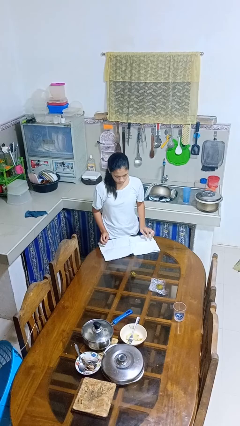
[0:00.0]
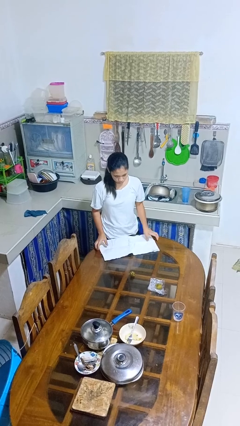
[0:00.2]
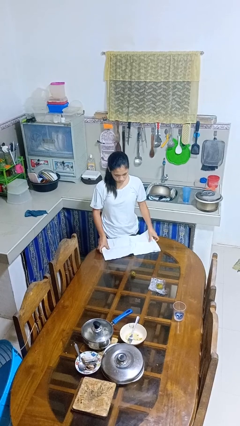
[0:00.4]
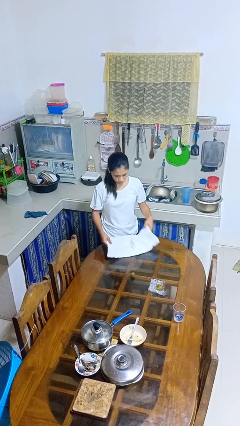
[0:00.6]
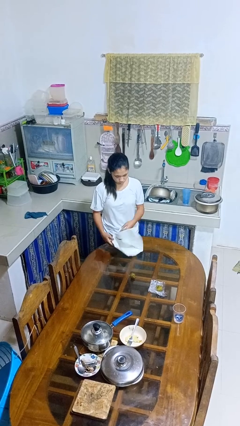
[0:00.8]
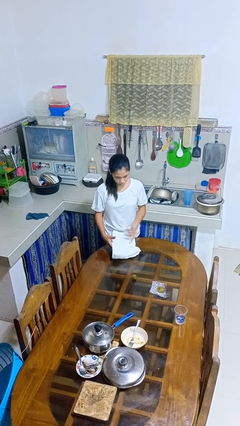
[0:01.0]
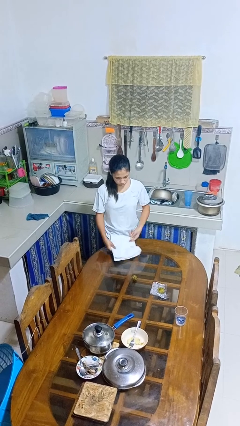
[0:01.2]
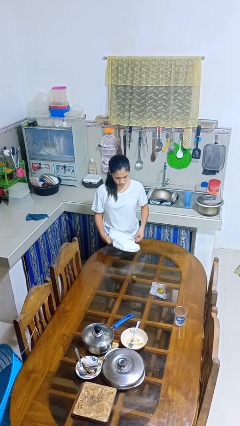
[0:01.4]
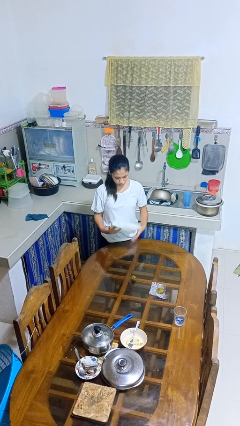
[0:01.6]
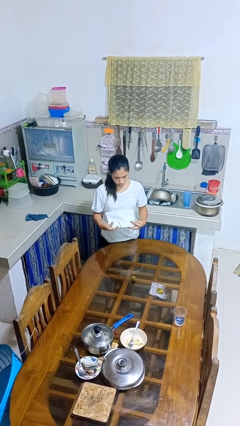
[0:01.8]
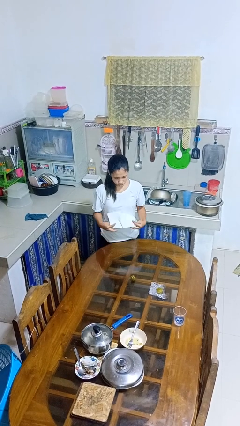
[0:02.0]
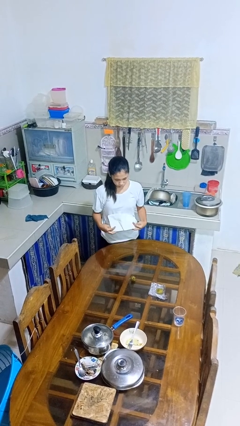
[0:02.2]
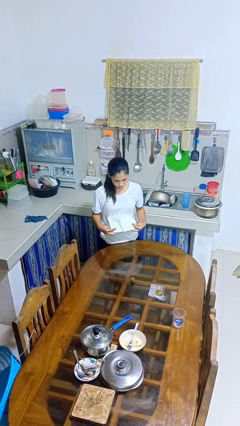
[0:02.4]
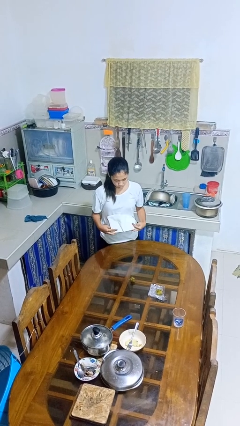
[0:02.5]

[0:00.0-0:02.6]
person folds tablecloth

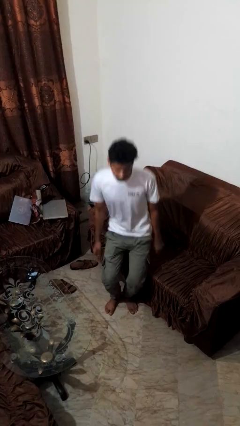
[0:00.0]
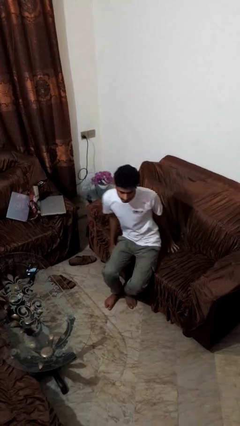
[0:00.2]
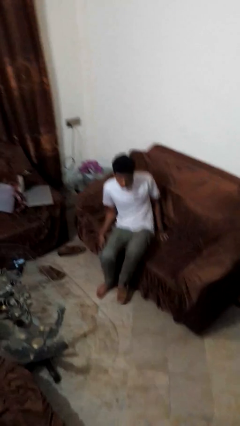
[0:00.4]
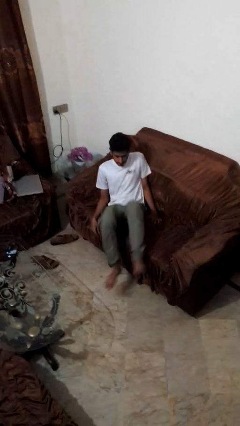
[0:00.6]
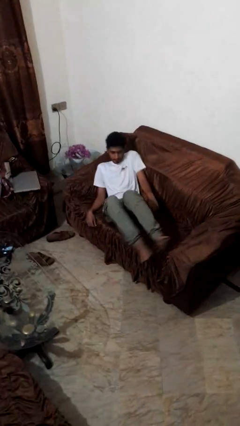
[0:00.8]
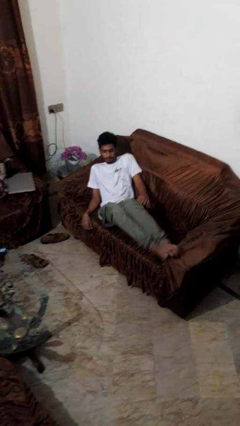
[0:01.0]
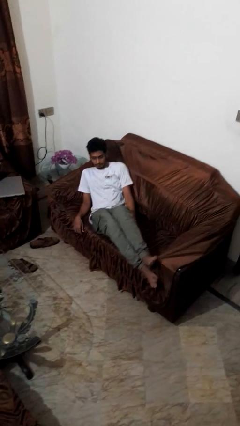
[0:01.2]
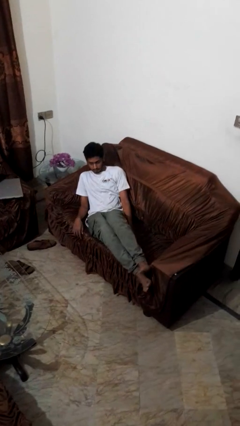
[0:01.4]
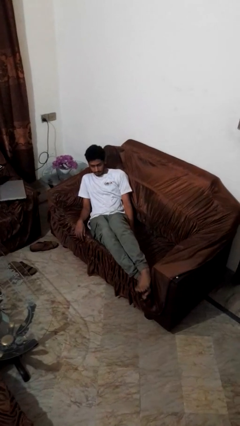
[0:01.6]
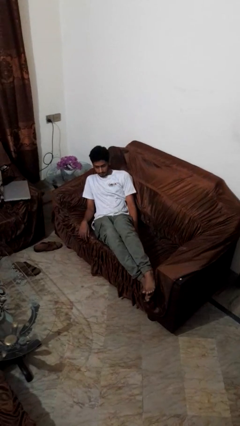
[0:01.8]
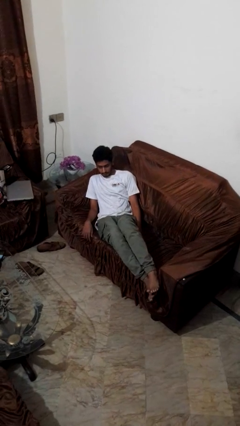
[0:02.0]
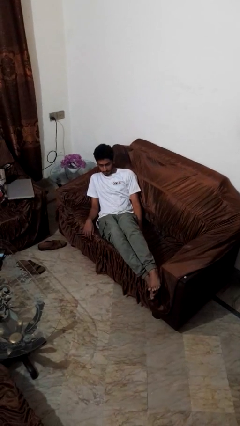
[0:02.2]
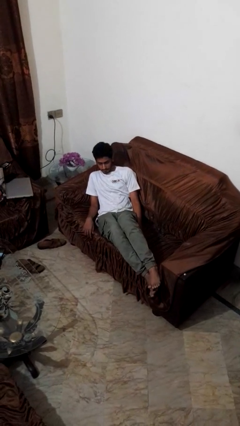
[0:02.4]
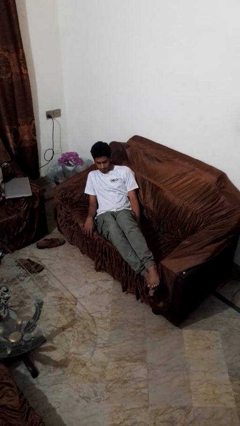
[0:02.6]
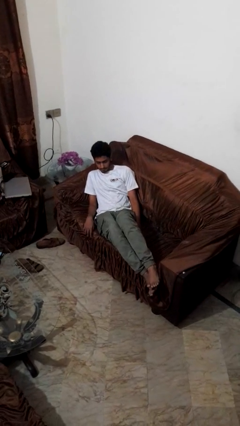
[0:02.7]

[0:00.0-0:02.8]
person lies down on couch

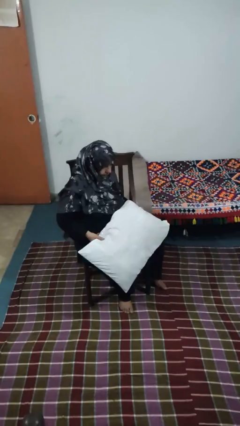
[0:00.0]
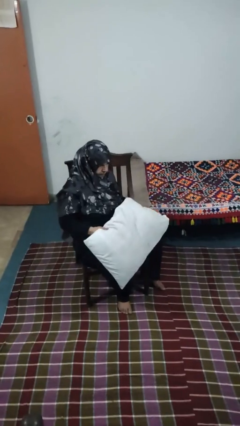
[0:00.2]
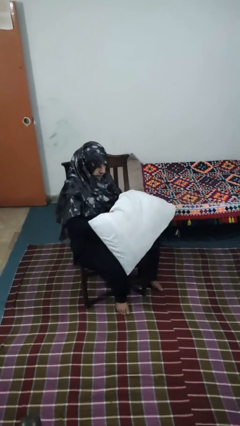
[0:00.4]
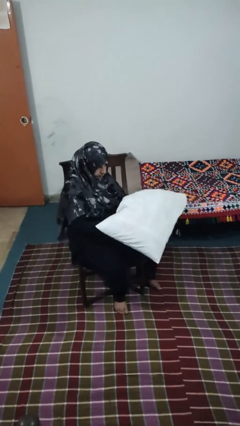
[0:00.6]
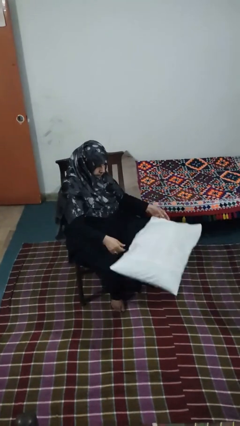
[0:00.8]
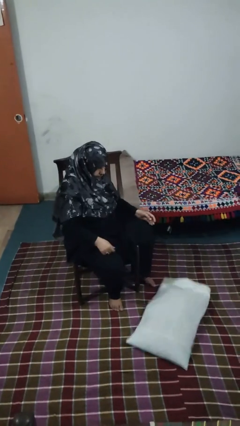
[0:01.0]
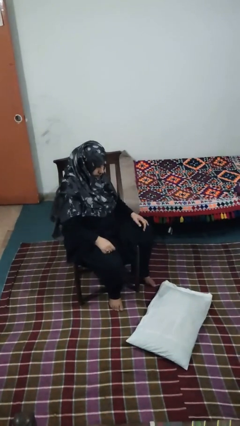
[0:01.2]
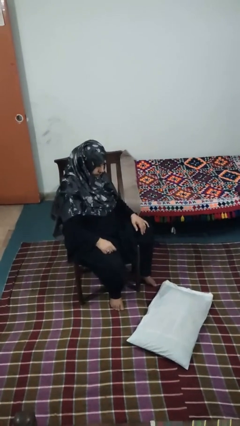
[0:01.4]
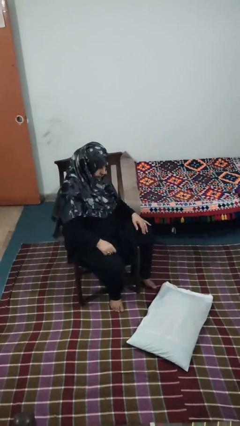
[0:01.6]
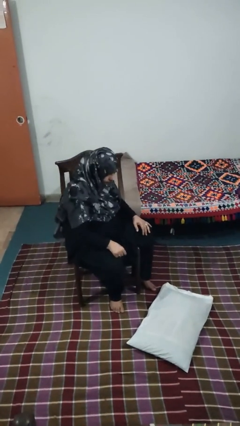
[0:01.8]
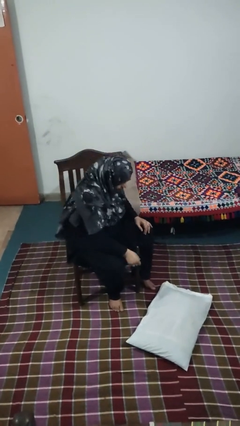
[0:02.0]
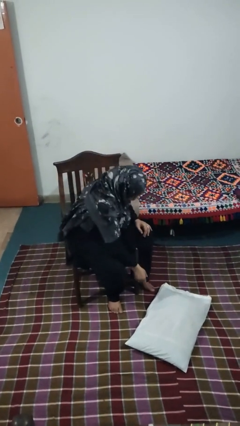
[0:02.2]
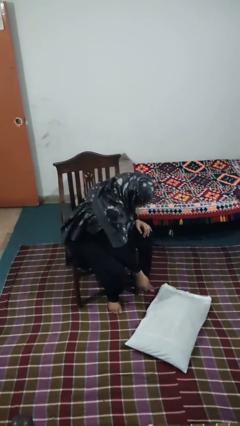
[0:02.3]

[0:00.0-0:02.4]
person drops object

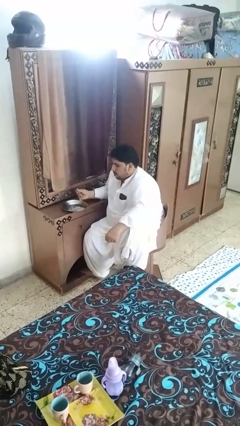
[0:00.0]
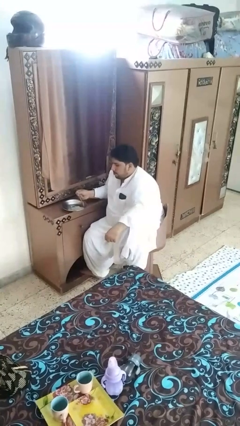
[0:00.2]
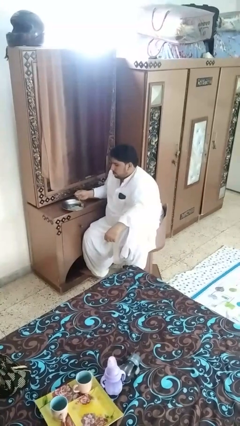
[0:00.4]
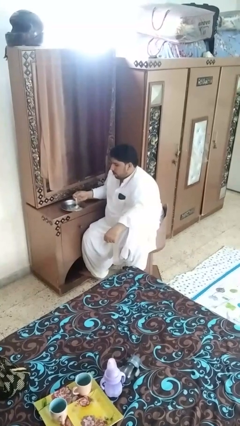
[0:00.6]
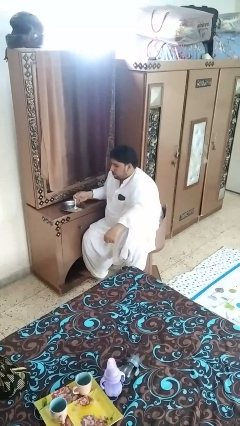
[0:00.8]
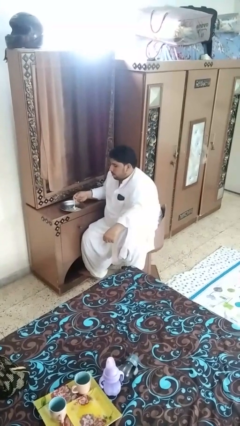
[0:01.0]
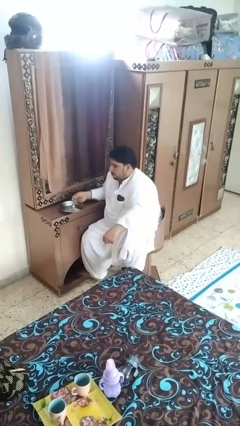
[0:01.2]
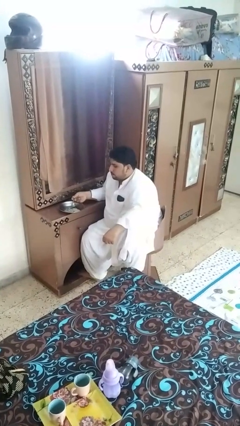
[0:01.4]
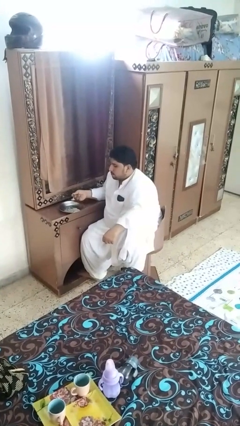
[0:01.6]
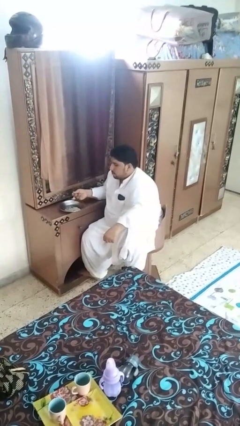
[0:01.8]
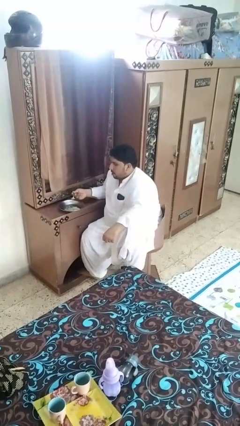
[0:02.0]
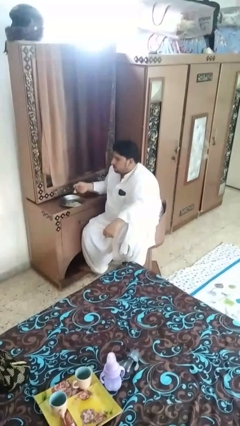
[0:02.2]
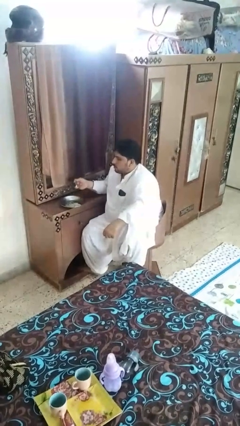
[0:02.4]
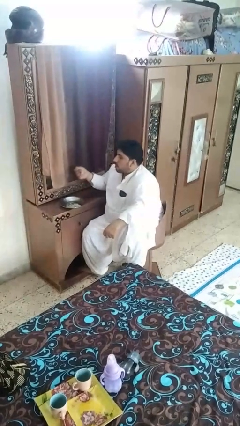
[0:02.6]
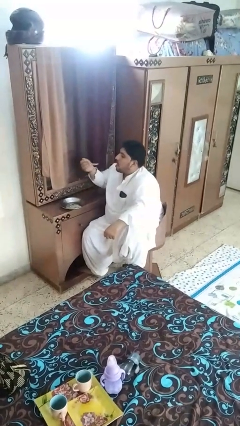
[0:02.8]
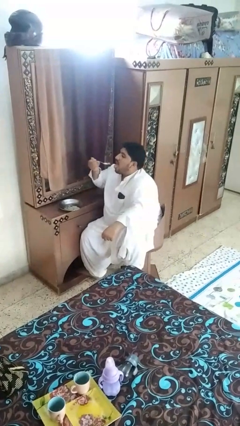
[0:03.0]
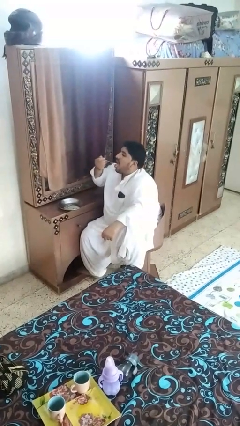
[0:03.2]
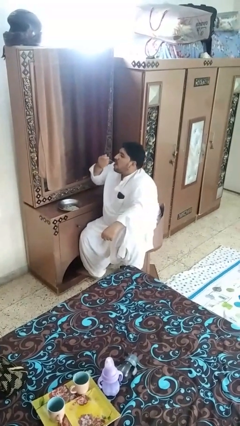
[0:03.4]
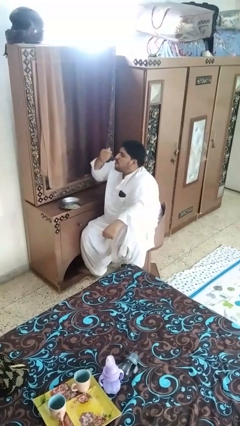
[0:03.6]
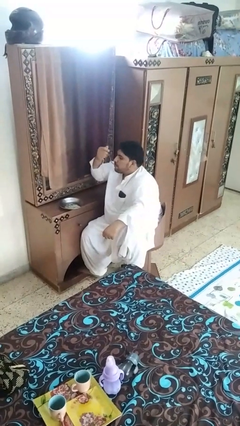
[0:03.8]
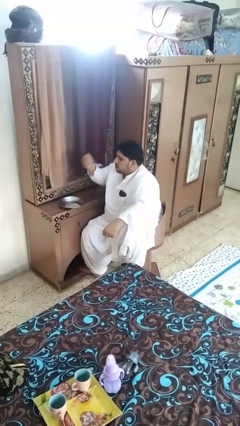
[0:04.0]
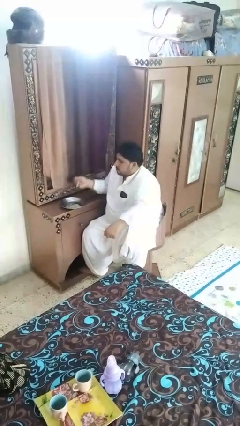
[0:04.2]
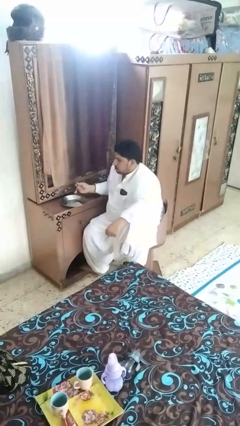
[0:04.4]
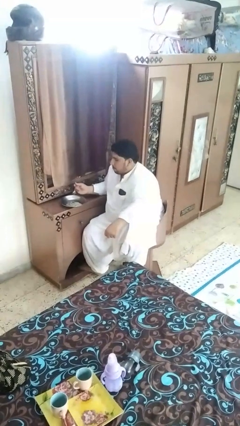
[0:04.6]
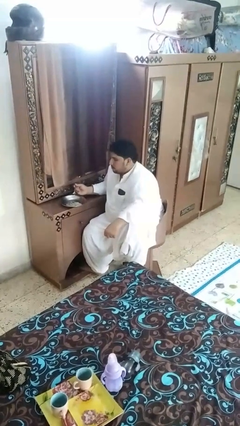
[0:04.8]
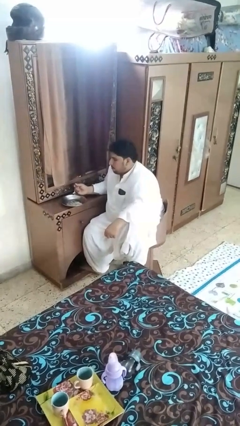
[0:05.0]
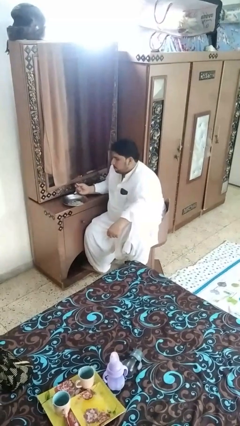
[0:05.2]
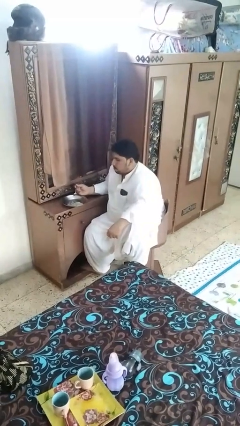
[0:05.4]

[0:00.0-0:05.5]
person eats with utensil

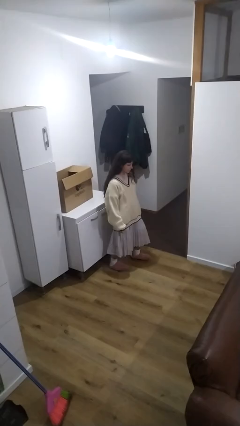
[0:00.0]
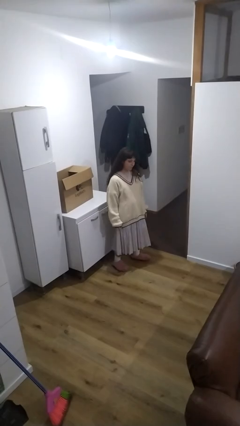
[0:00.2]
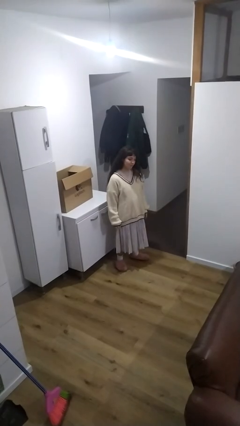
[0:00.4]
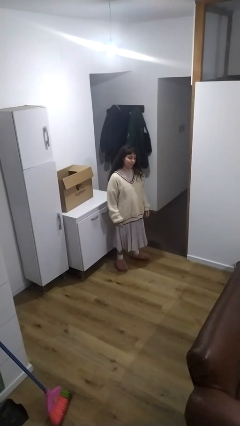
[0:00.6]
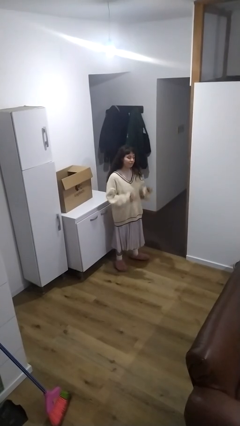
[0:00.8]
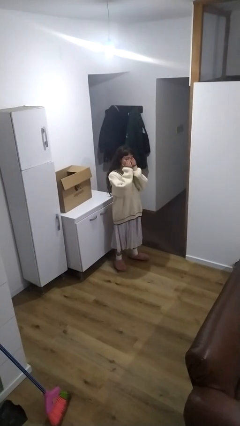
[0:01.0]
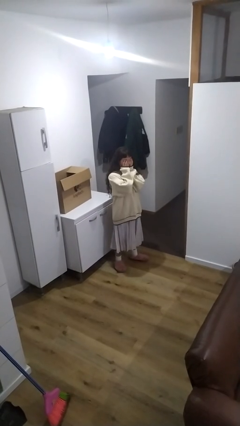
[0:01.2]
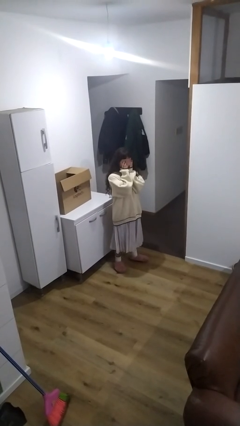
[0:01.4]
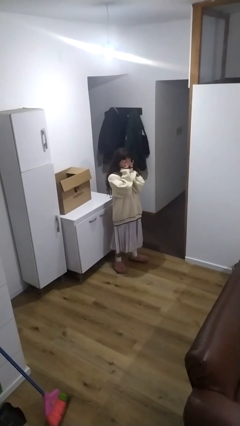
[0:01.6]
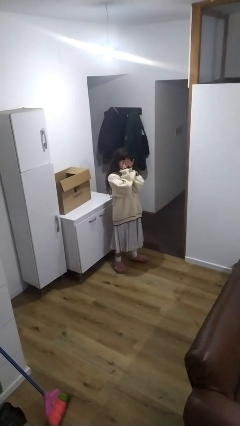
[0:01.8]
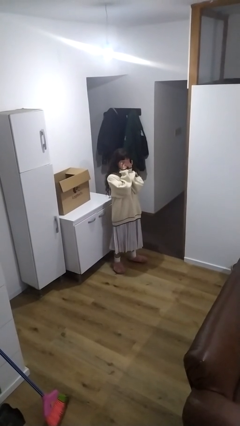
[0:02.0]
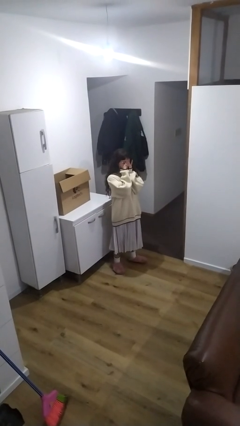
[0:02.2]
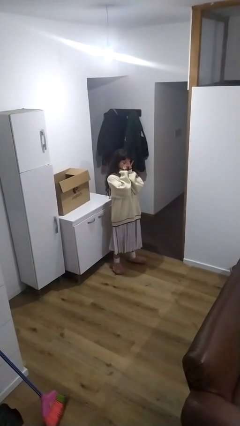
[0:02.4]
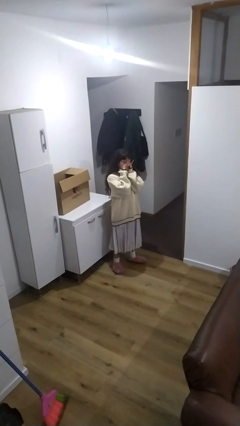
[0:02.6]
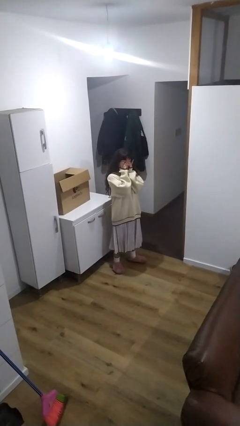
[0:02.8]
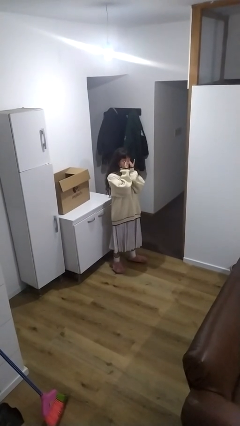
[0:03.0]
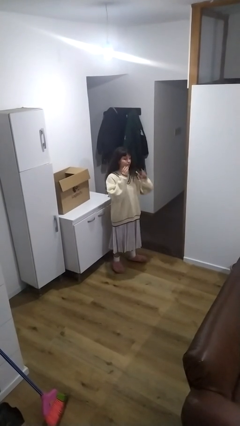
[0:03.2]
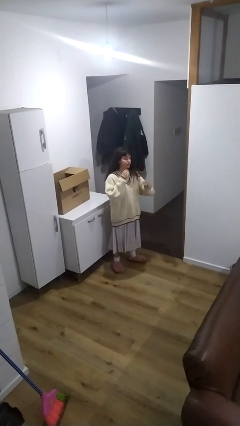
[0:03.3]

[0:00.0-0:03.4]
person rubs eyes

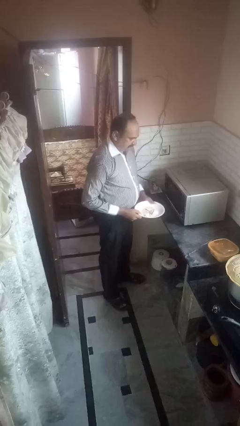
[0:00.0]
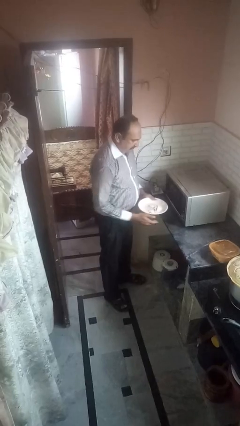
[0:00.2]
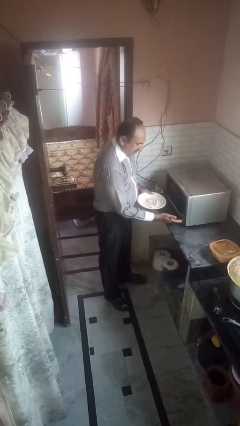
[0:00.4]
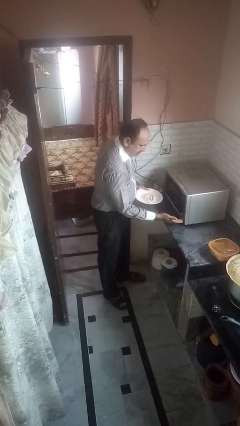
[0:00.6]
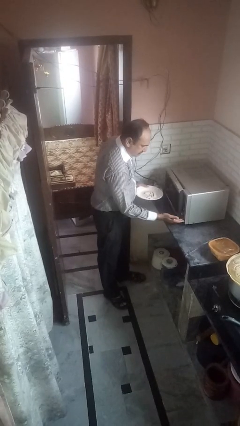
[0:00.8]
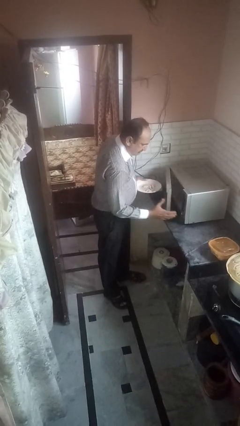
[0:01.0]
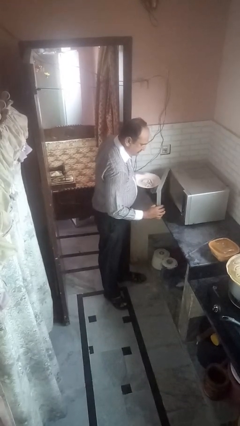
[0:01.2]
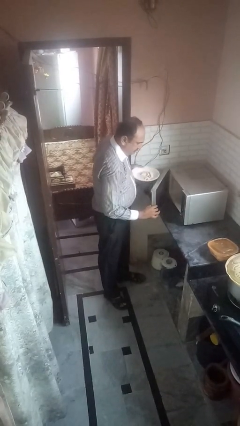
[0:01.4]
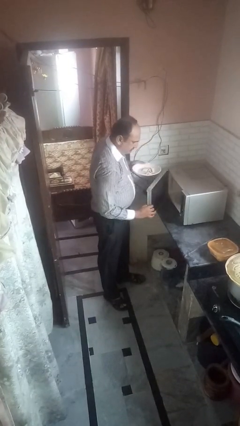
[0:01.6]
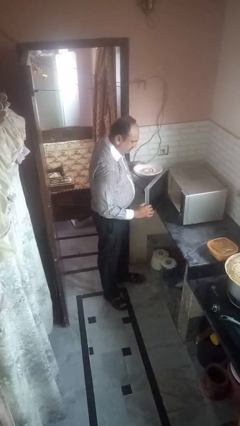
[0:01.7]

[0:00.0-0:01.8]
person opens microwave
